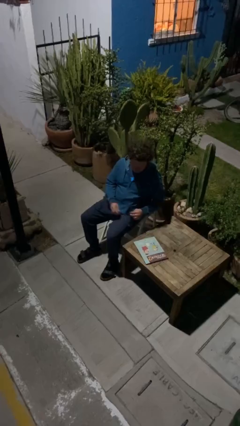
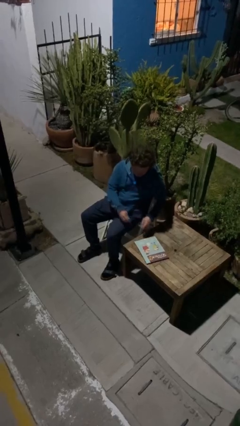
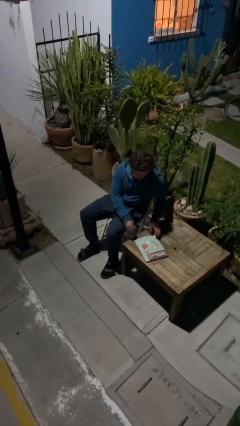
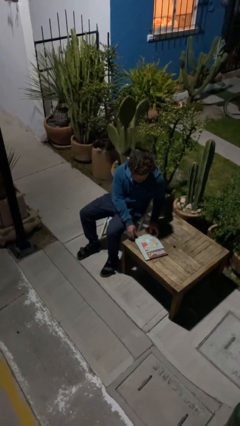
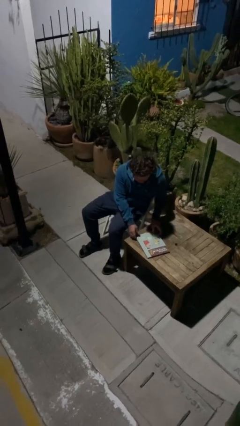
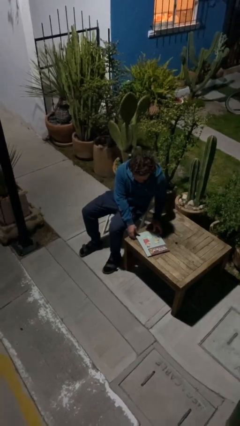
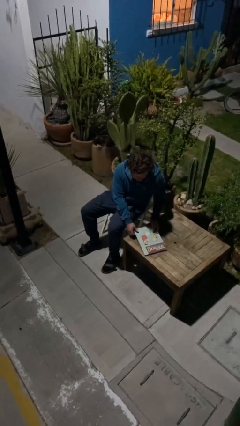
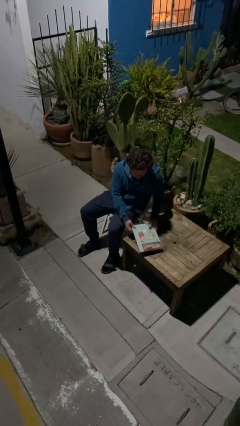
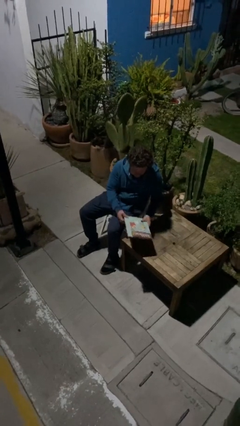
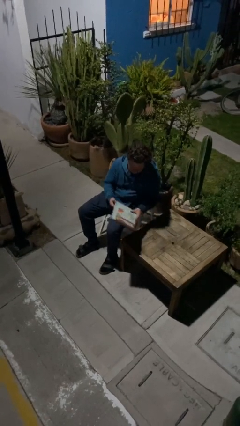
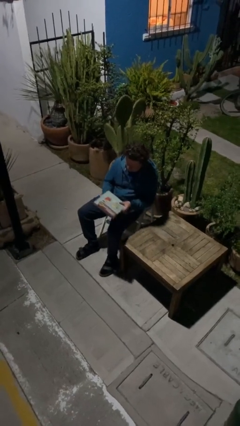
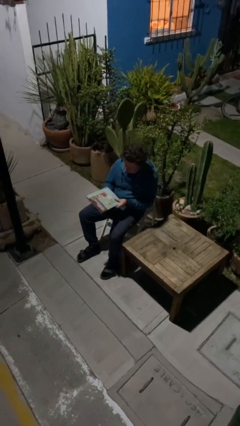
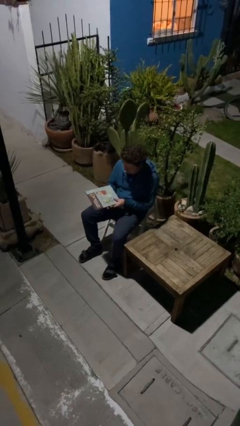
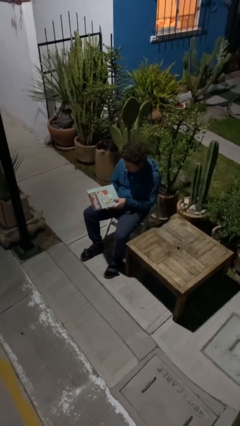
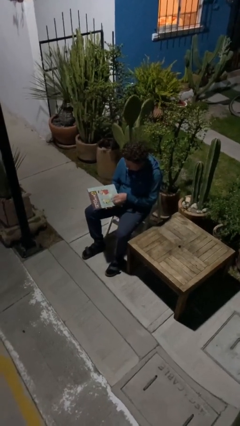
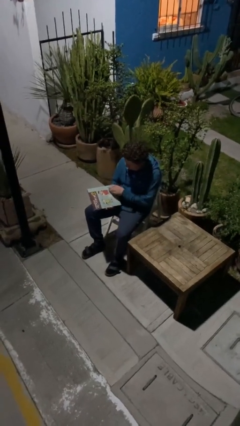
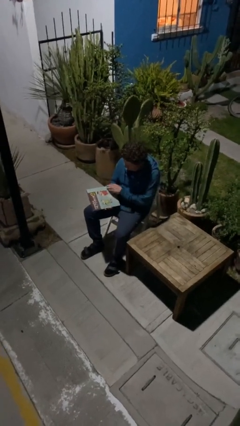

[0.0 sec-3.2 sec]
person picks up object from table

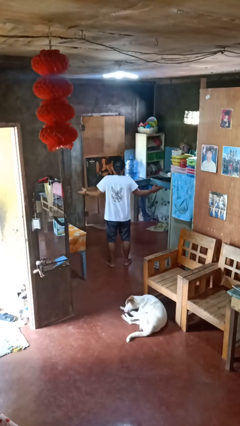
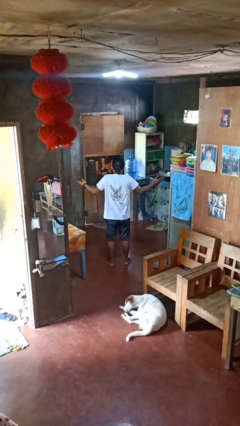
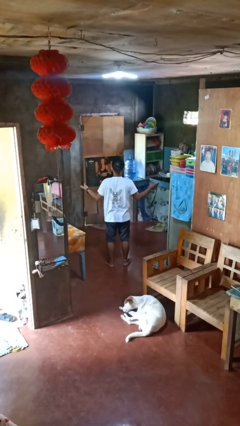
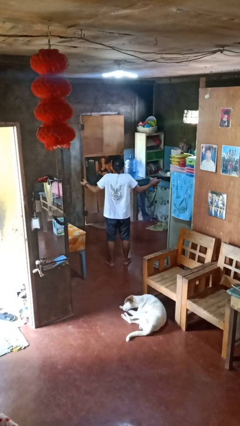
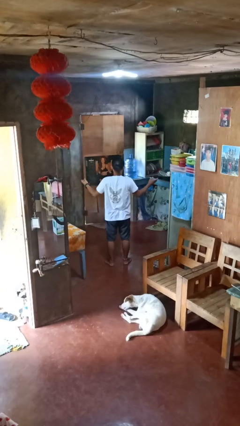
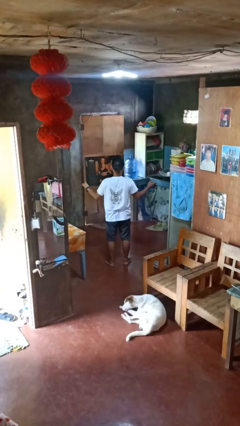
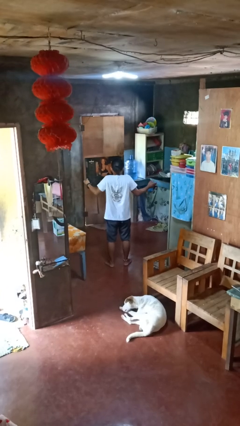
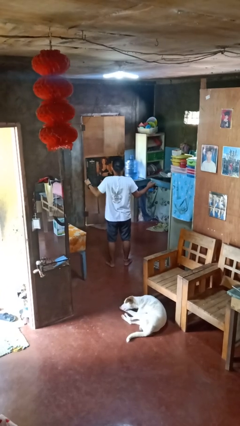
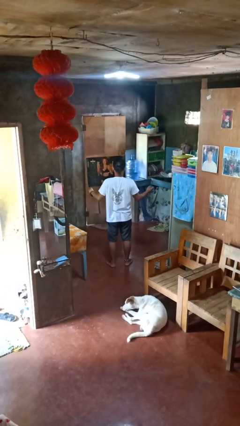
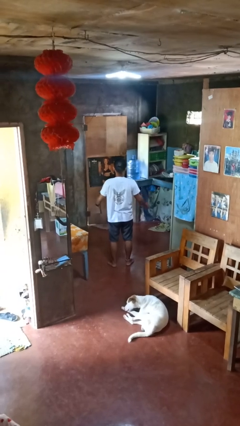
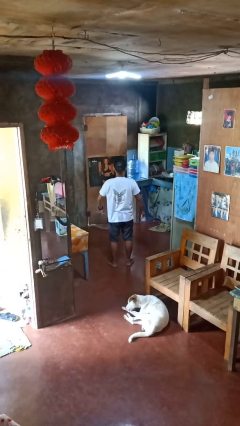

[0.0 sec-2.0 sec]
person shrugs

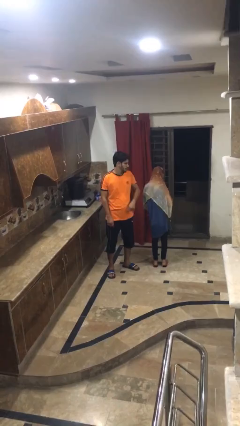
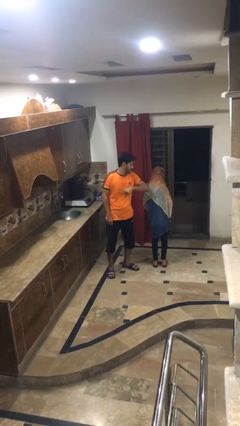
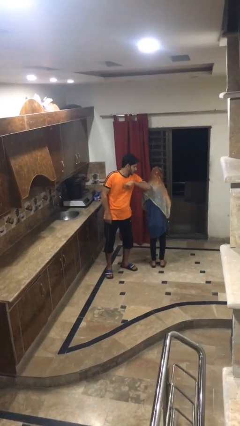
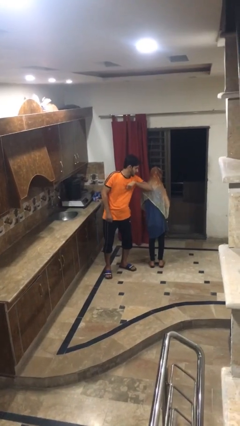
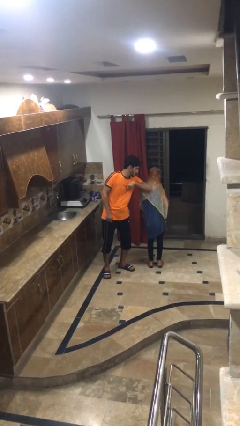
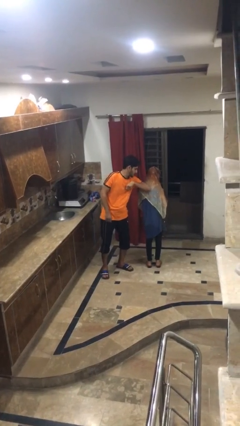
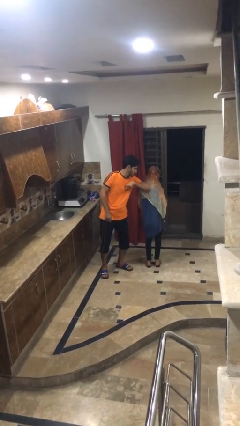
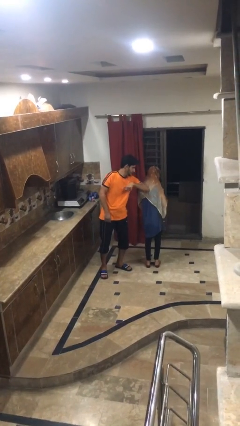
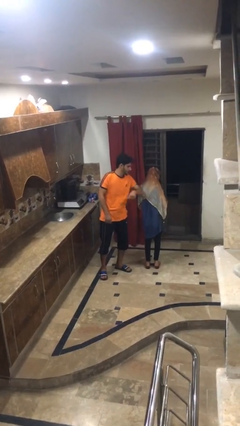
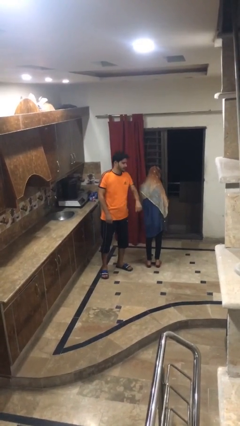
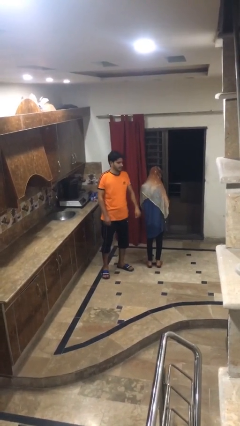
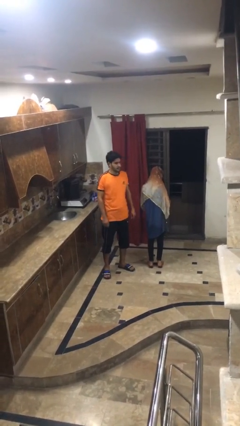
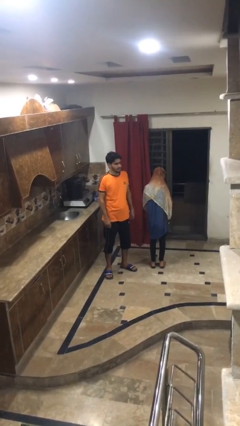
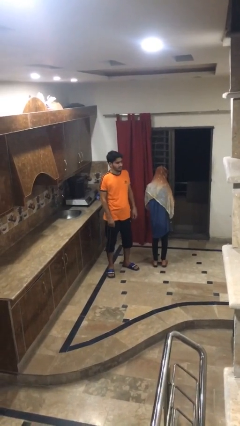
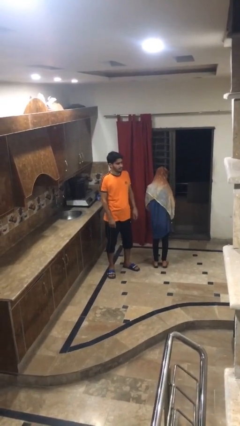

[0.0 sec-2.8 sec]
person nudges person with elbow

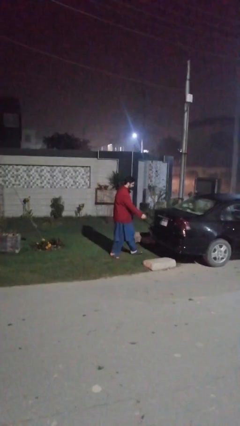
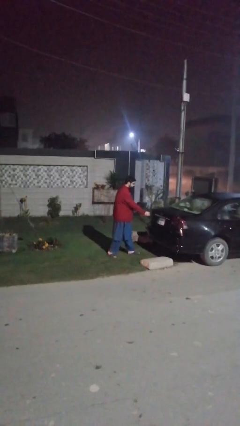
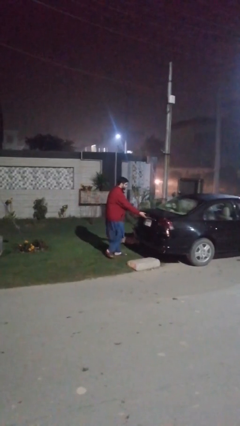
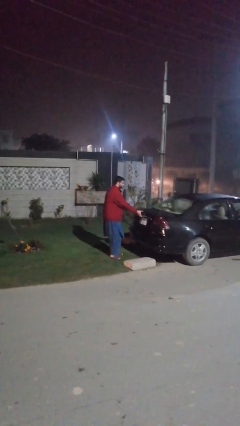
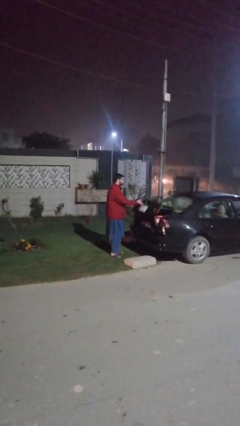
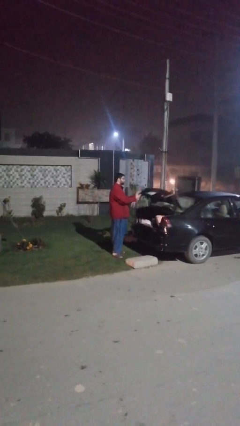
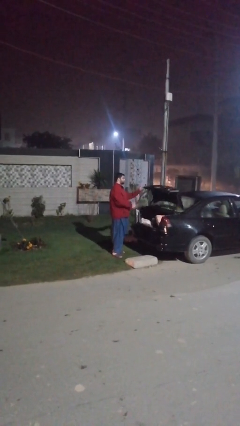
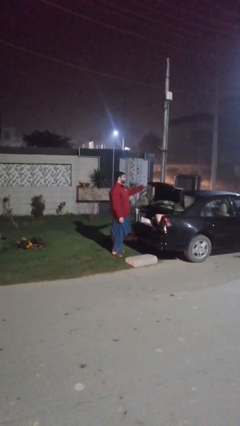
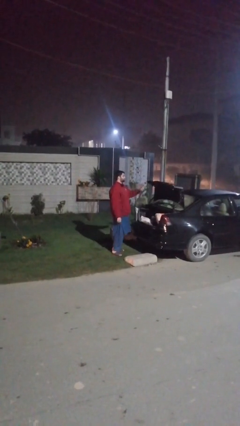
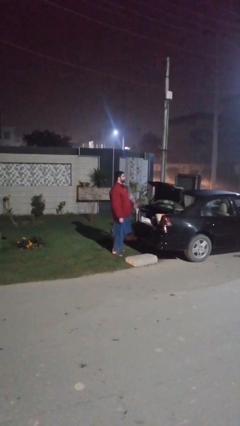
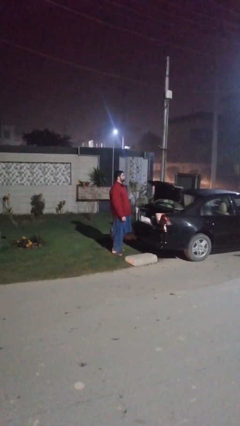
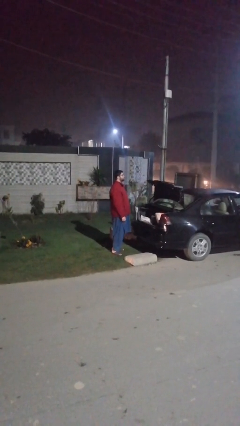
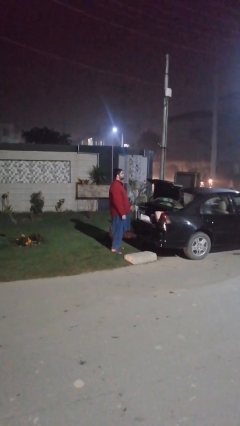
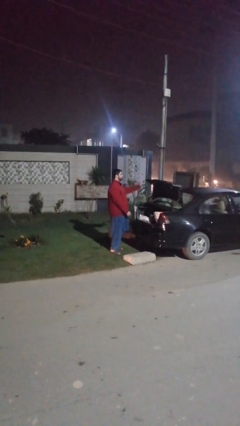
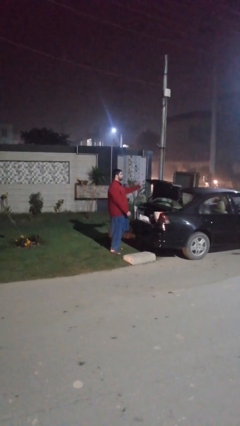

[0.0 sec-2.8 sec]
person opens car trunk

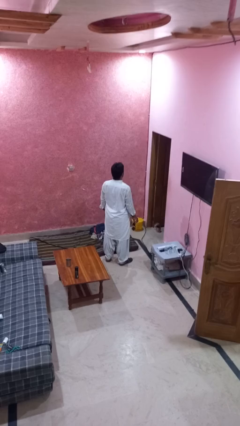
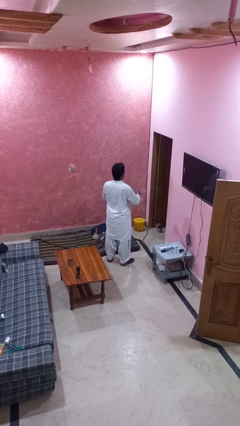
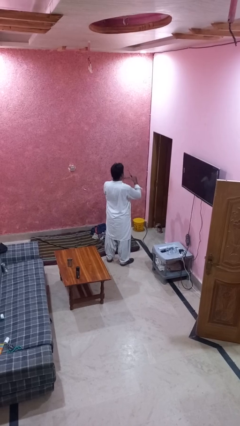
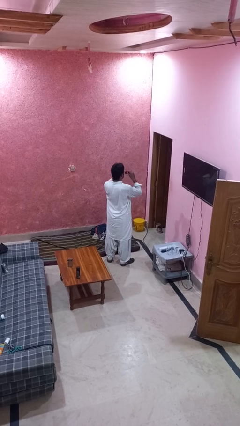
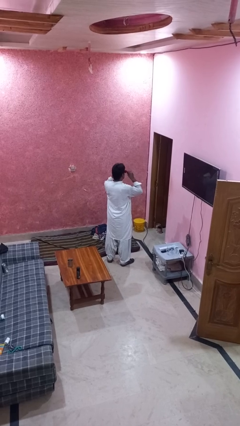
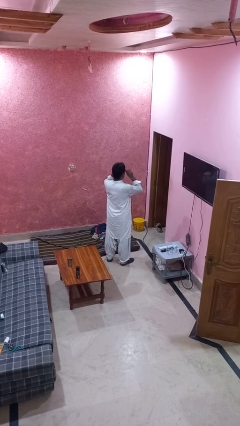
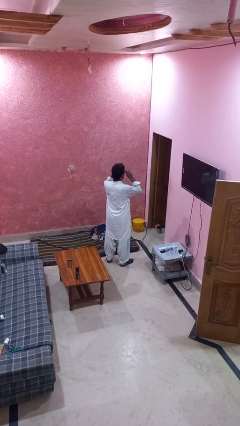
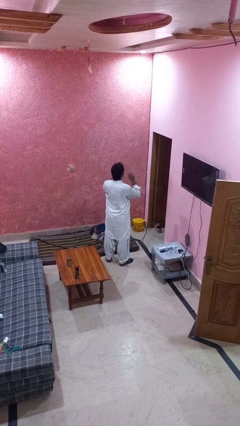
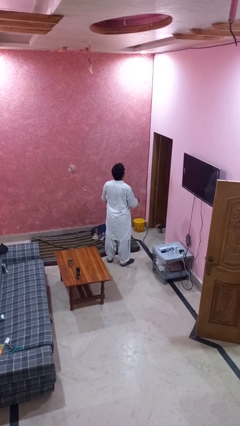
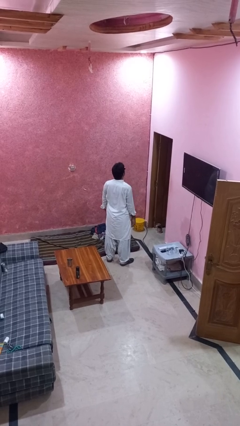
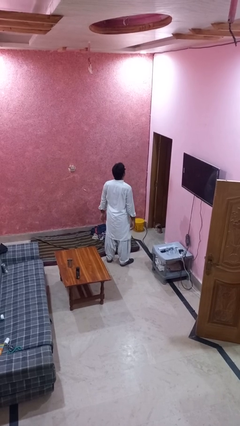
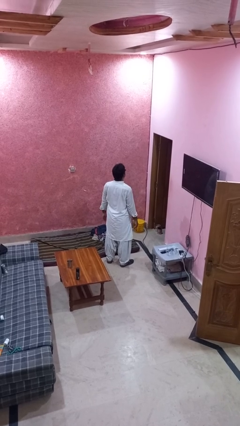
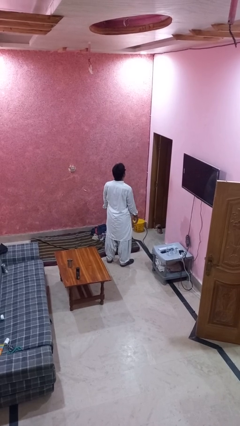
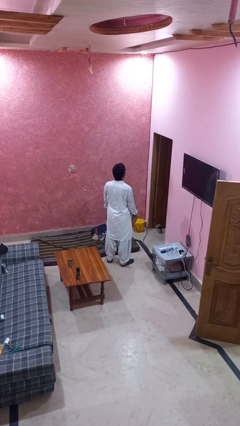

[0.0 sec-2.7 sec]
person puts on sunglasses

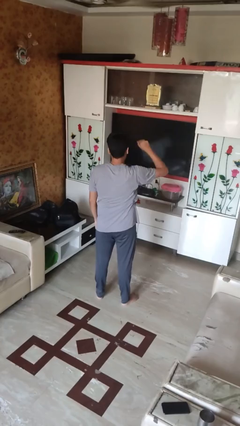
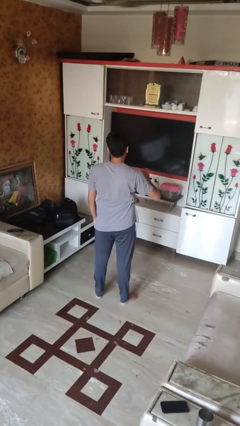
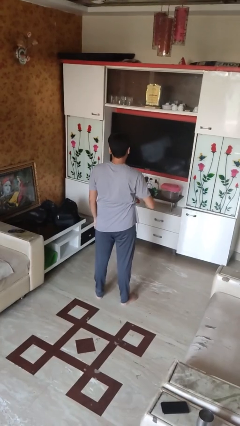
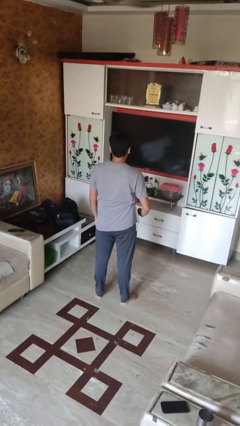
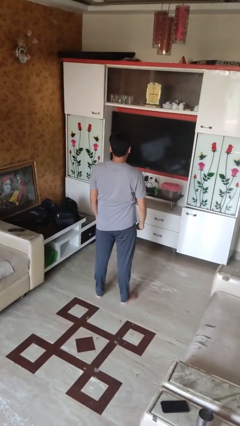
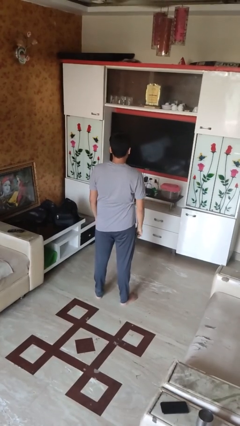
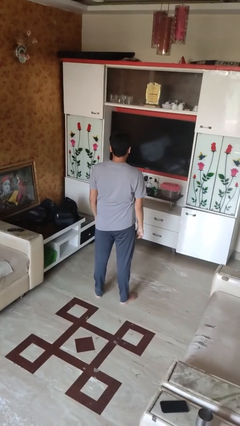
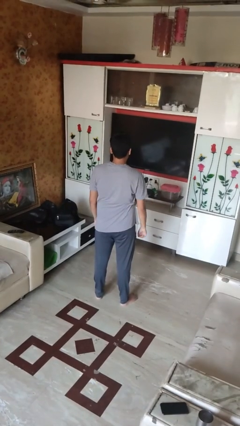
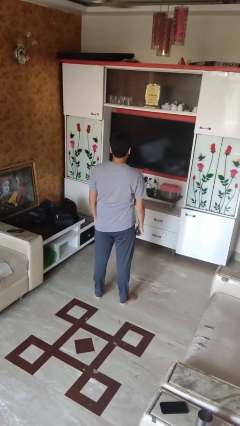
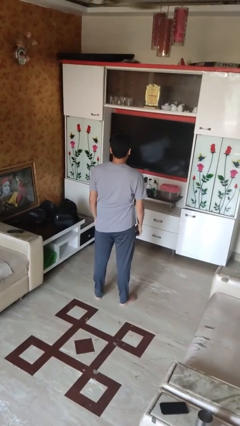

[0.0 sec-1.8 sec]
person gestures lower hand

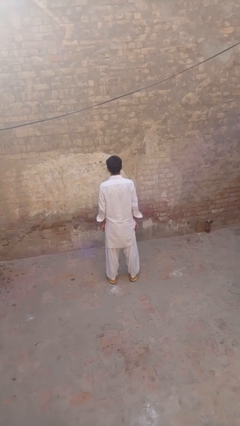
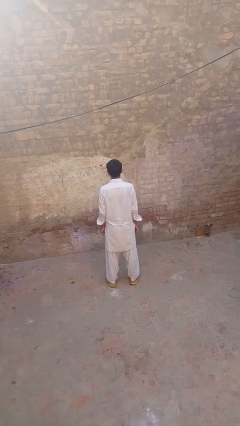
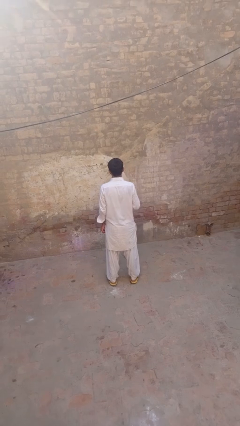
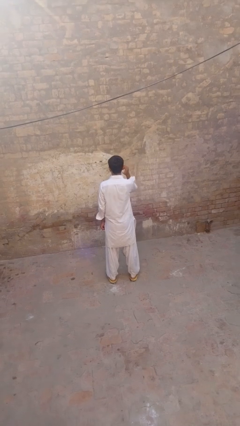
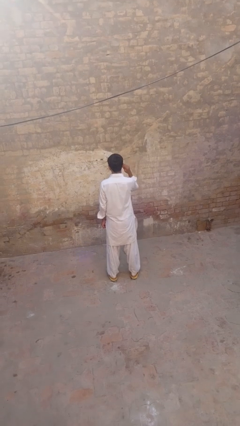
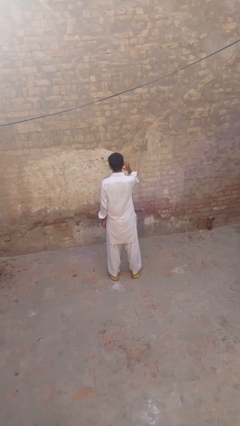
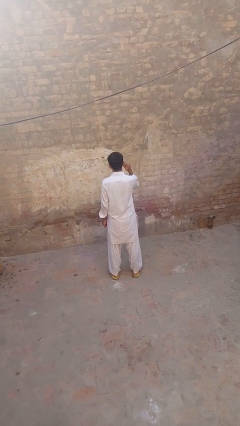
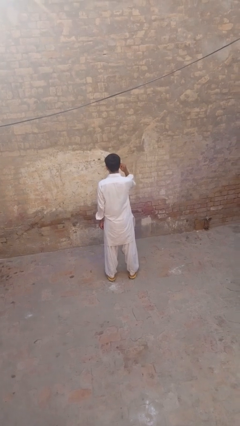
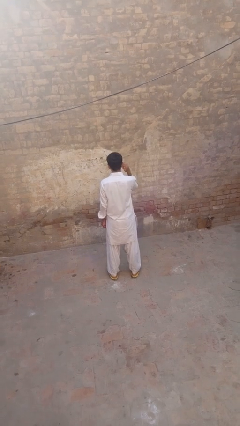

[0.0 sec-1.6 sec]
person touches earlobe

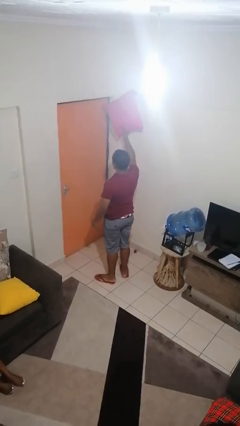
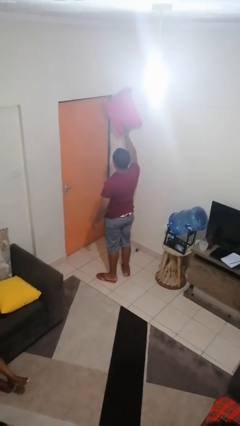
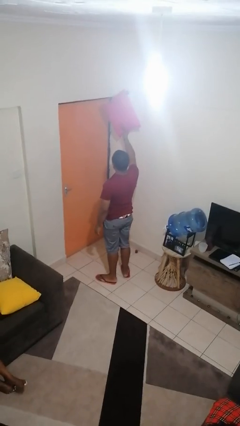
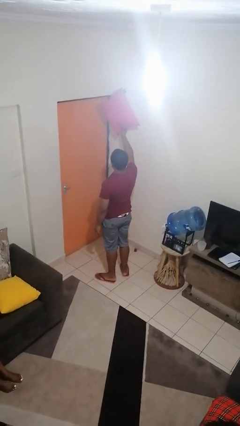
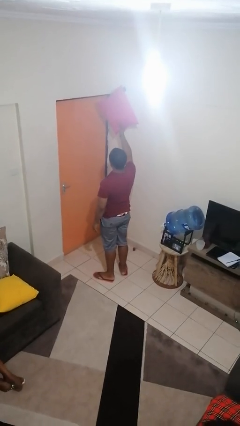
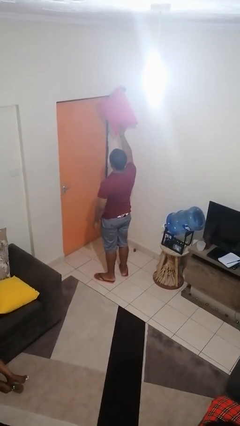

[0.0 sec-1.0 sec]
person drops object
